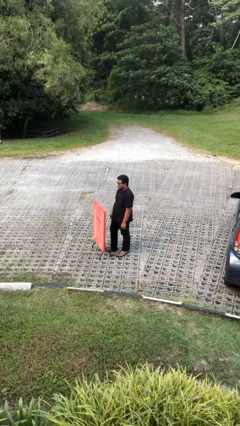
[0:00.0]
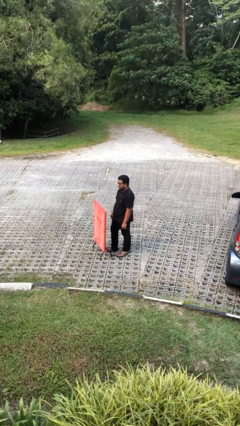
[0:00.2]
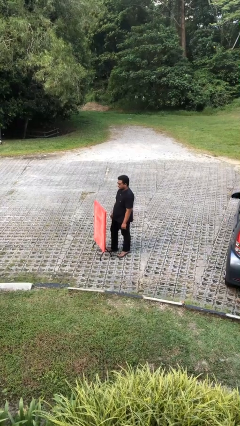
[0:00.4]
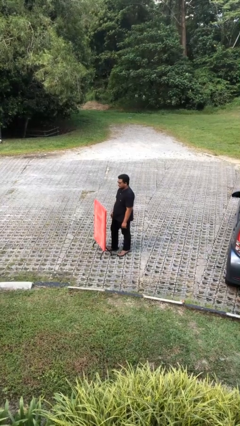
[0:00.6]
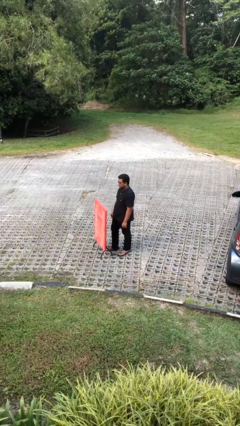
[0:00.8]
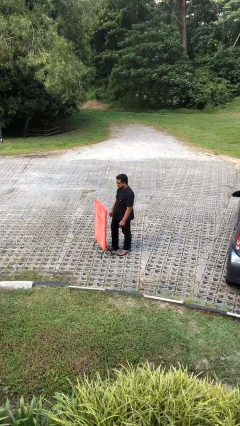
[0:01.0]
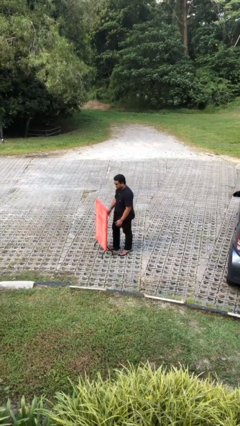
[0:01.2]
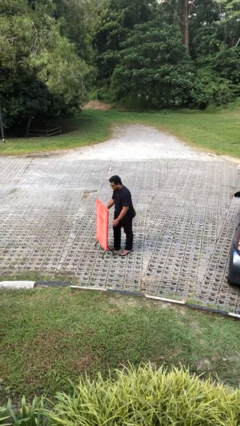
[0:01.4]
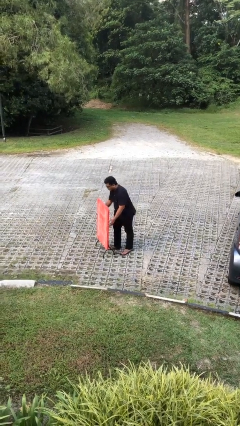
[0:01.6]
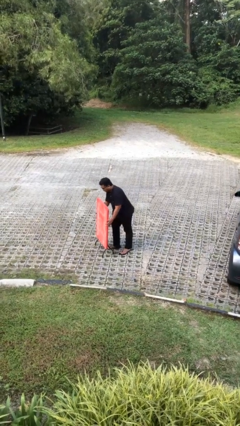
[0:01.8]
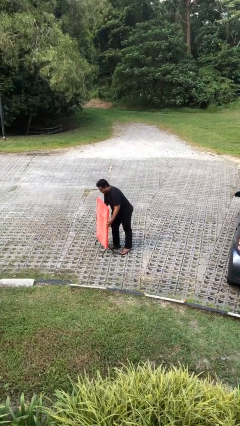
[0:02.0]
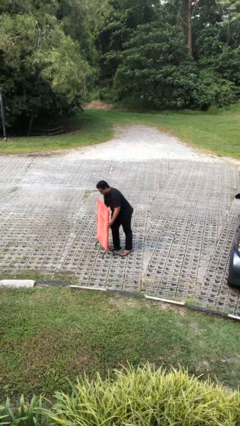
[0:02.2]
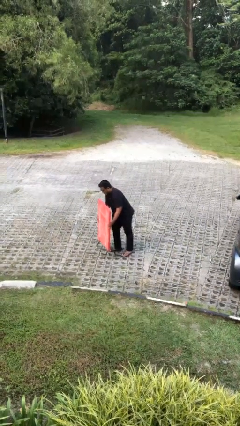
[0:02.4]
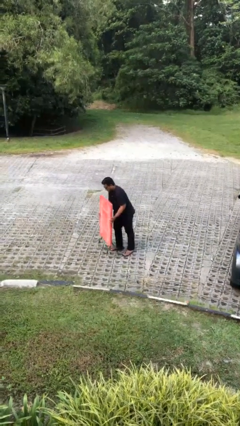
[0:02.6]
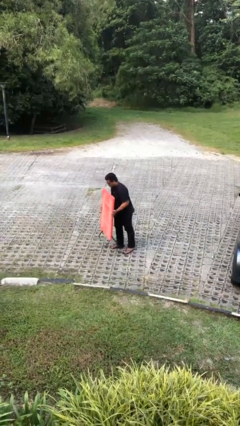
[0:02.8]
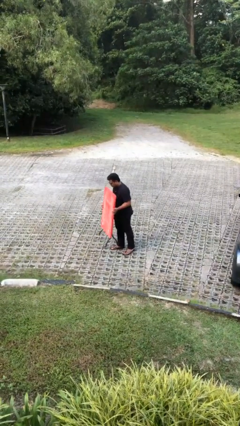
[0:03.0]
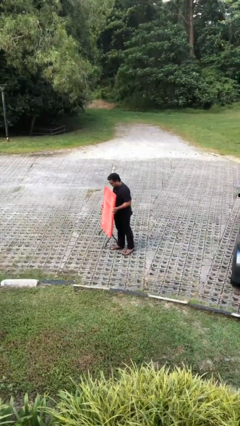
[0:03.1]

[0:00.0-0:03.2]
person picks up object from floor

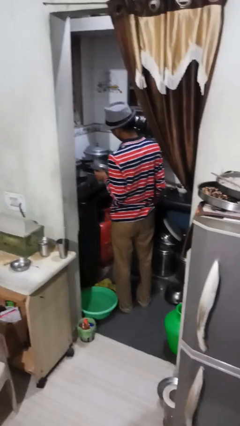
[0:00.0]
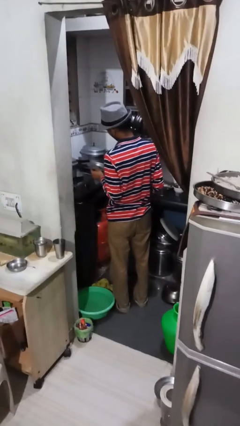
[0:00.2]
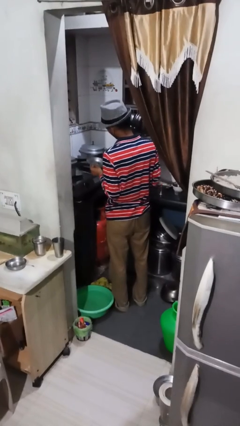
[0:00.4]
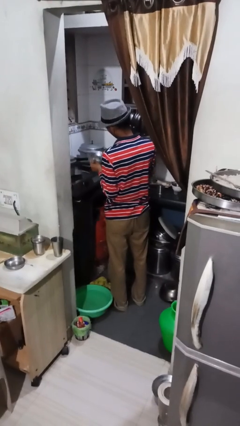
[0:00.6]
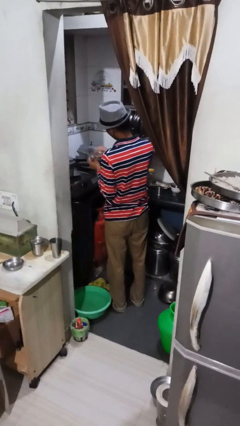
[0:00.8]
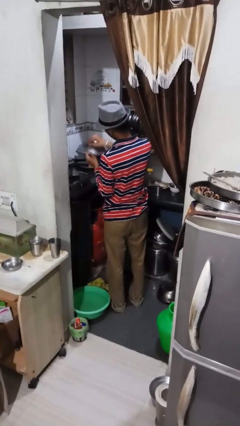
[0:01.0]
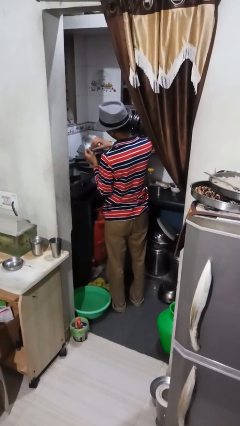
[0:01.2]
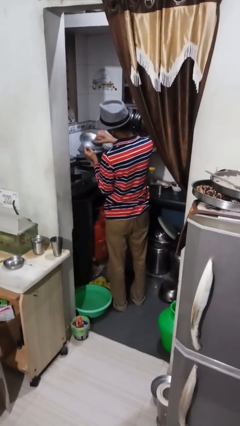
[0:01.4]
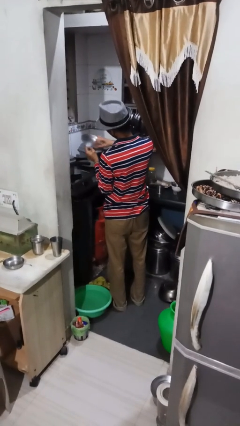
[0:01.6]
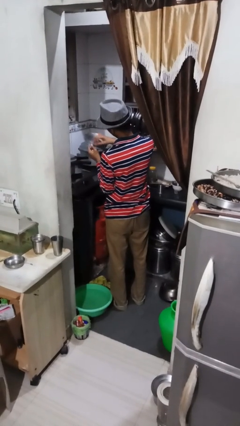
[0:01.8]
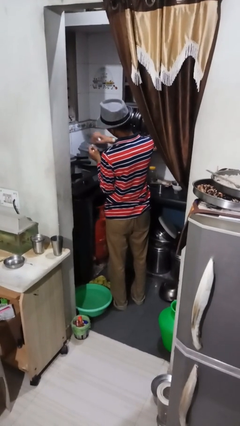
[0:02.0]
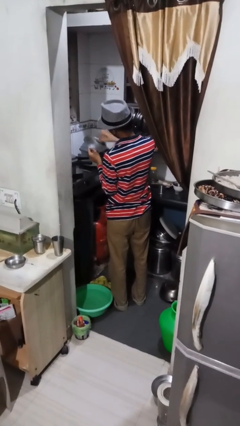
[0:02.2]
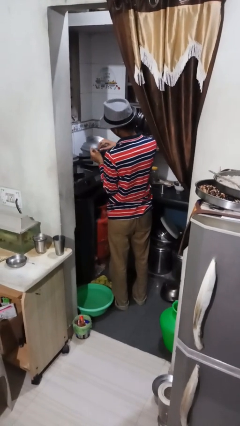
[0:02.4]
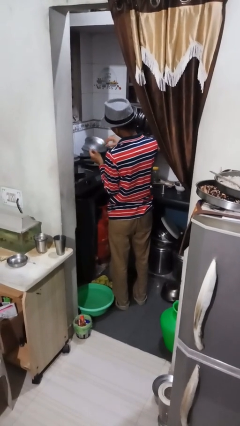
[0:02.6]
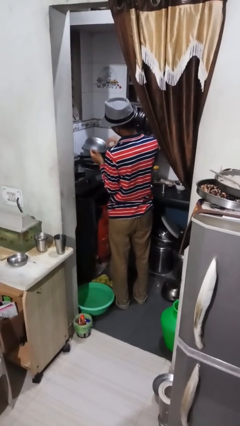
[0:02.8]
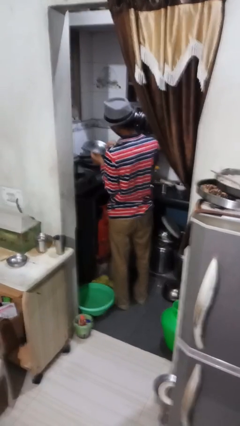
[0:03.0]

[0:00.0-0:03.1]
person washes dish

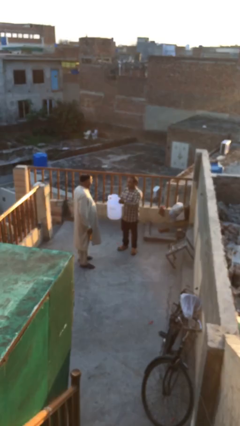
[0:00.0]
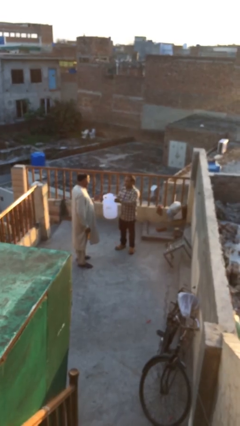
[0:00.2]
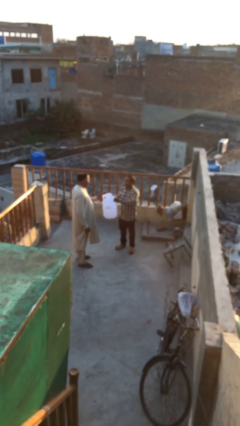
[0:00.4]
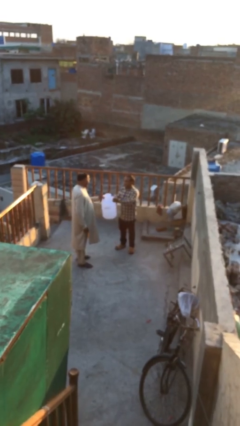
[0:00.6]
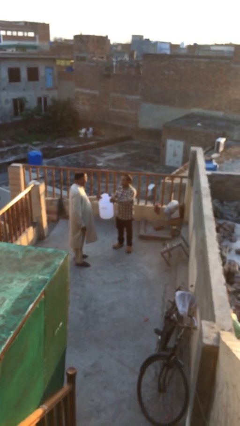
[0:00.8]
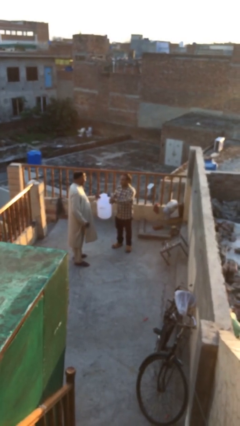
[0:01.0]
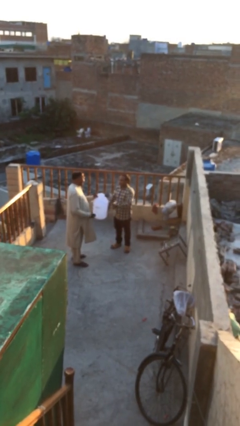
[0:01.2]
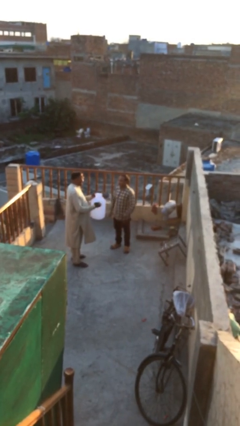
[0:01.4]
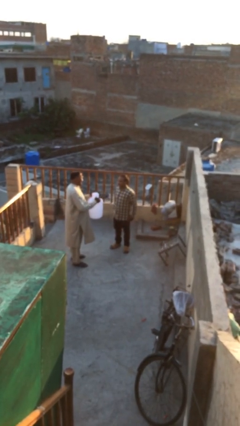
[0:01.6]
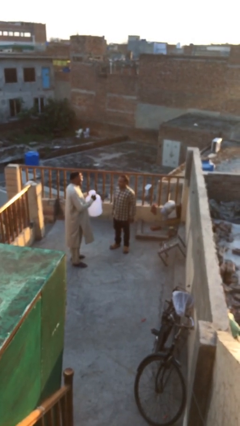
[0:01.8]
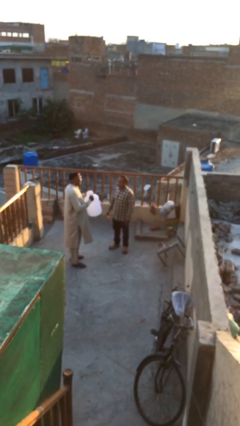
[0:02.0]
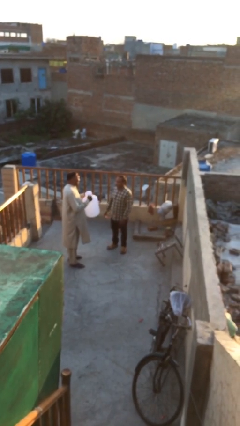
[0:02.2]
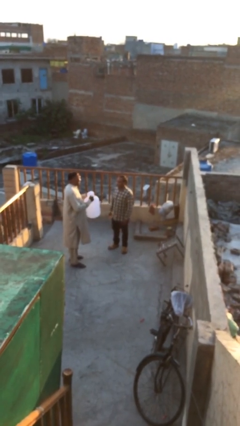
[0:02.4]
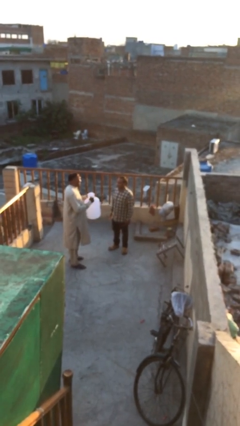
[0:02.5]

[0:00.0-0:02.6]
person transfers object to person

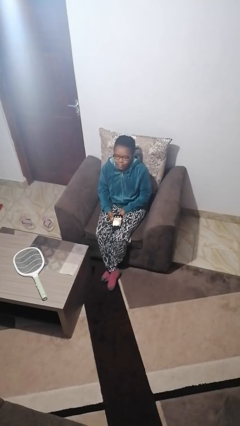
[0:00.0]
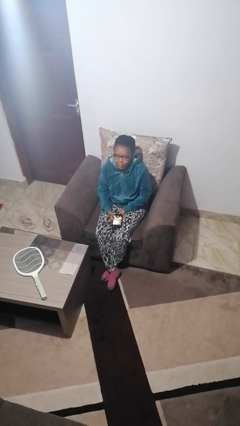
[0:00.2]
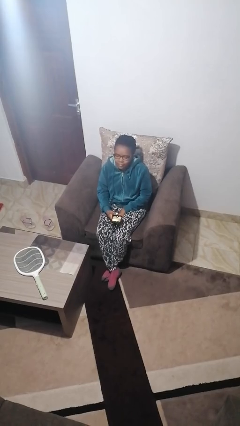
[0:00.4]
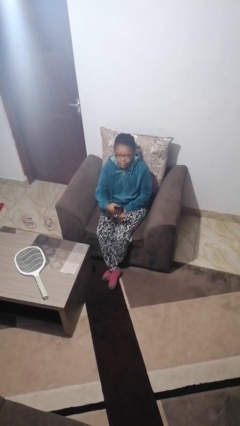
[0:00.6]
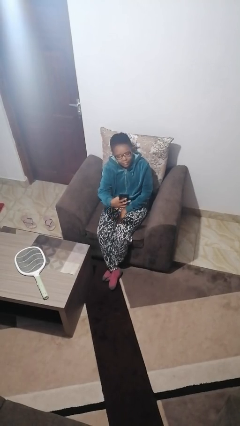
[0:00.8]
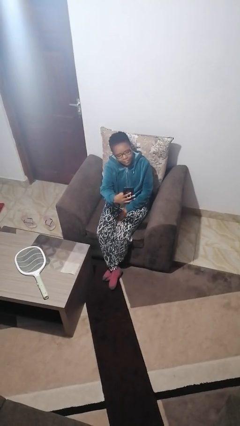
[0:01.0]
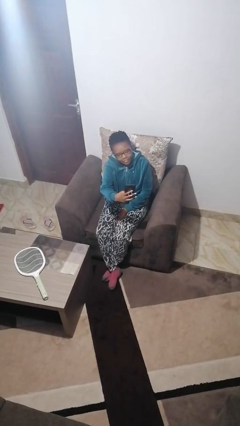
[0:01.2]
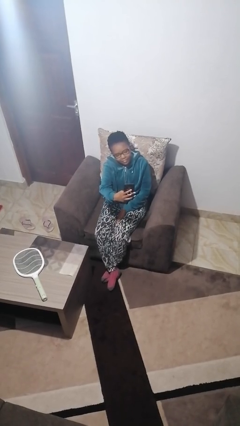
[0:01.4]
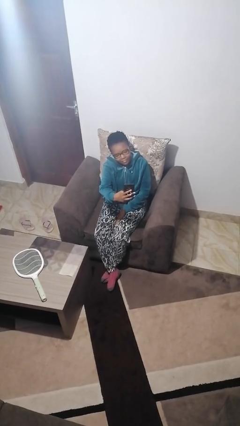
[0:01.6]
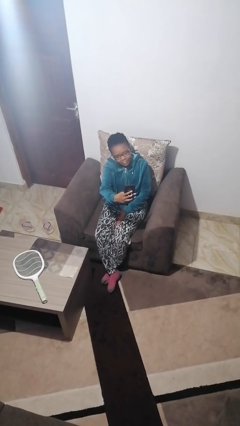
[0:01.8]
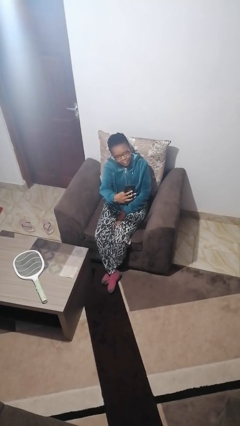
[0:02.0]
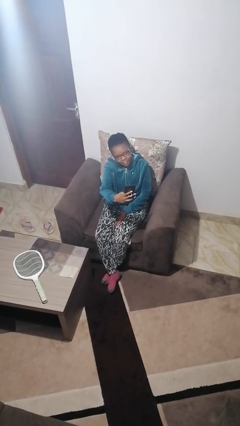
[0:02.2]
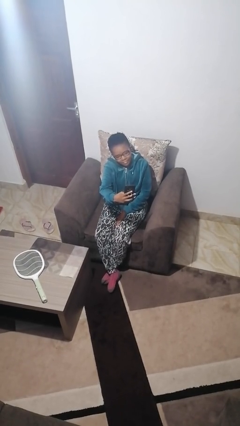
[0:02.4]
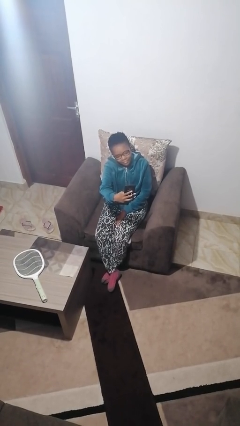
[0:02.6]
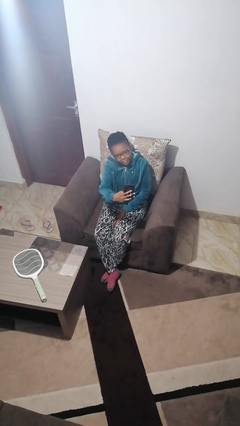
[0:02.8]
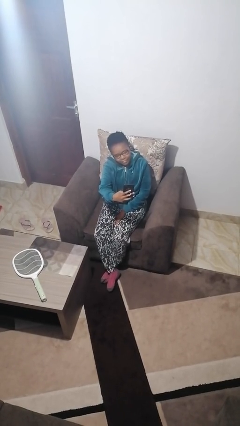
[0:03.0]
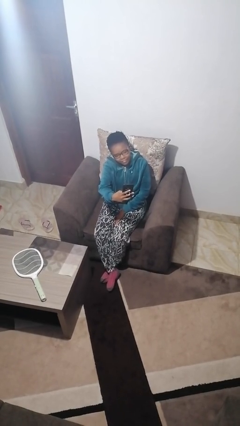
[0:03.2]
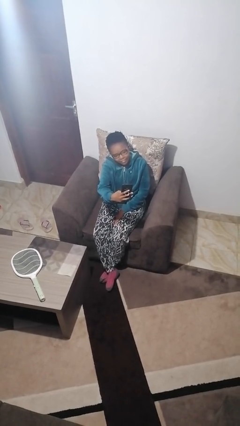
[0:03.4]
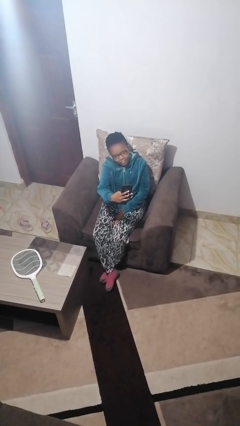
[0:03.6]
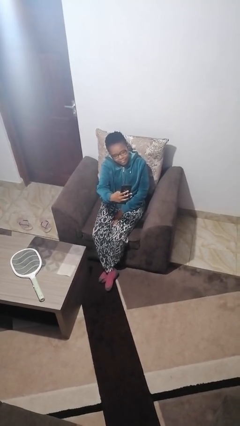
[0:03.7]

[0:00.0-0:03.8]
person takes selfie

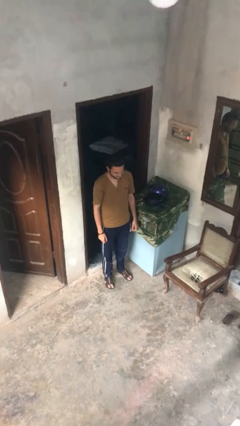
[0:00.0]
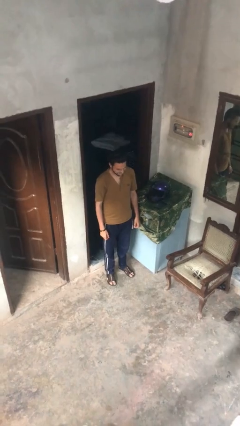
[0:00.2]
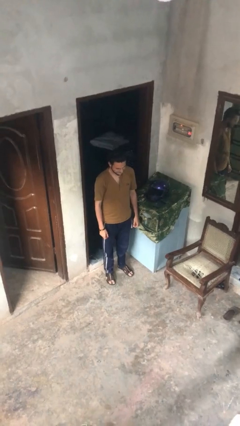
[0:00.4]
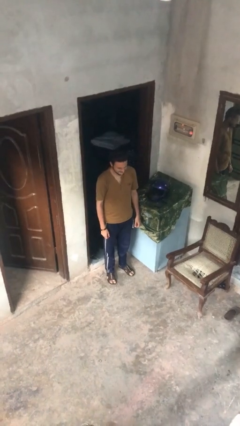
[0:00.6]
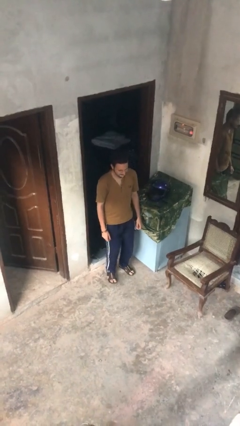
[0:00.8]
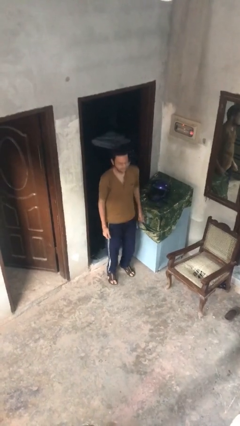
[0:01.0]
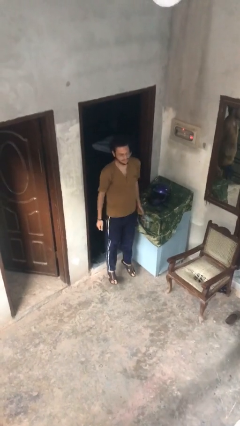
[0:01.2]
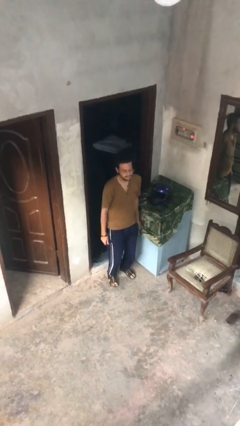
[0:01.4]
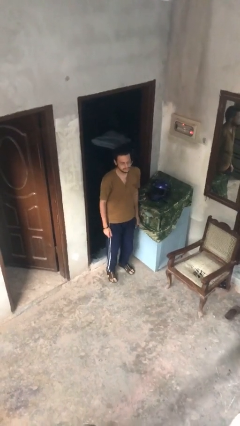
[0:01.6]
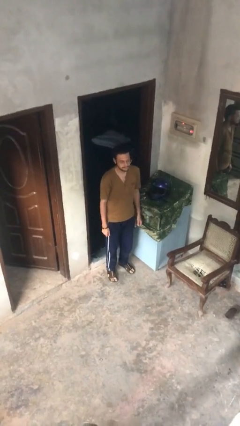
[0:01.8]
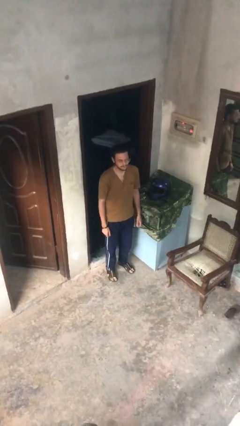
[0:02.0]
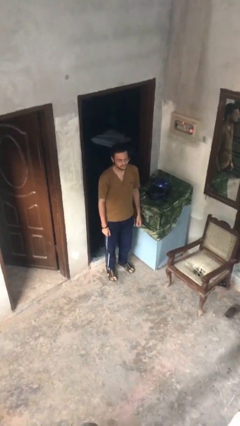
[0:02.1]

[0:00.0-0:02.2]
person jumps

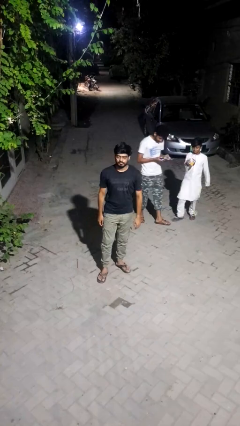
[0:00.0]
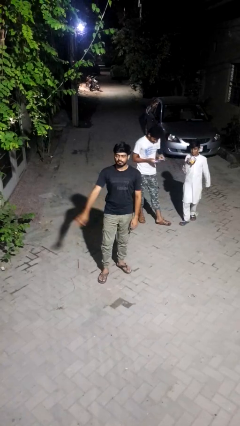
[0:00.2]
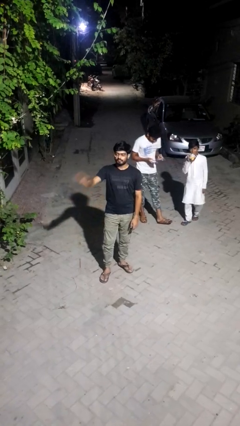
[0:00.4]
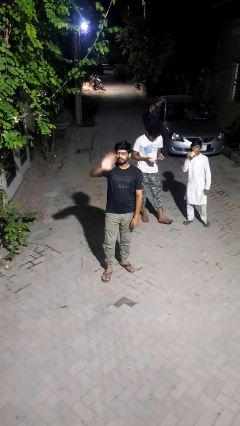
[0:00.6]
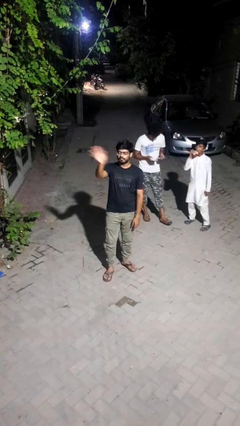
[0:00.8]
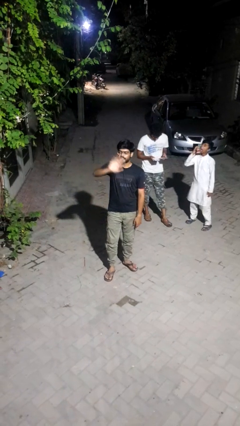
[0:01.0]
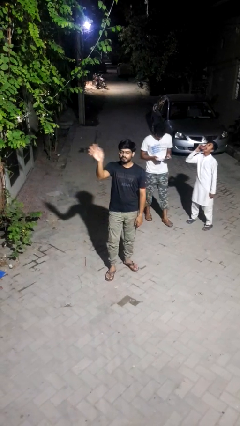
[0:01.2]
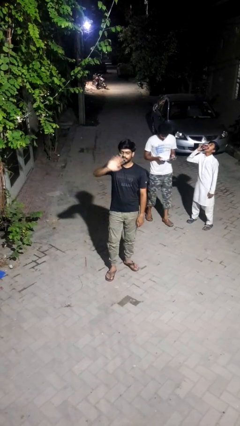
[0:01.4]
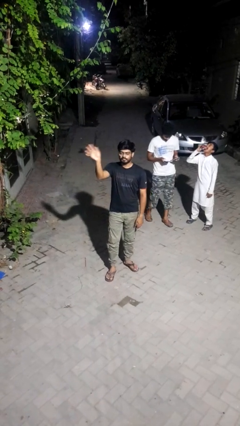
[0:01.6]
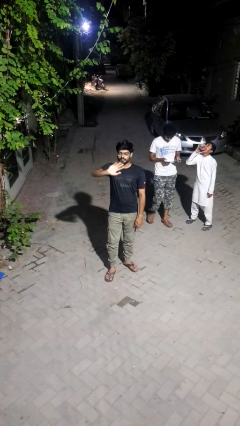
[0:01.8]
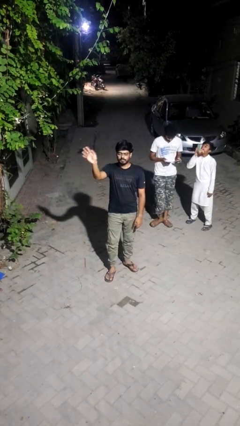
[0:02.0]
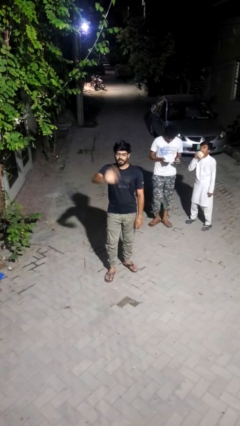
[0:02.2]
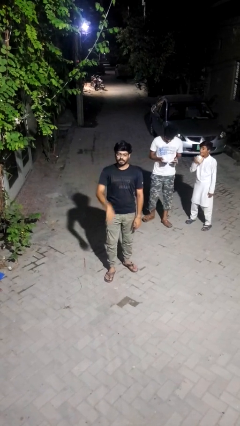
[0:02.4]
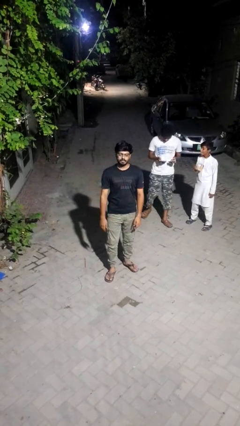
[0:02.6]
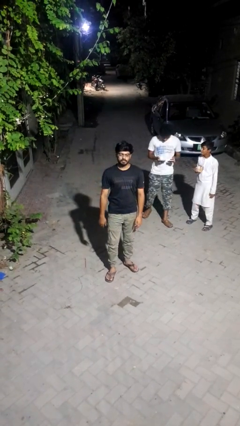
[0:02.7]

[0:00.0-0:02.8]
person waves at person

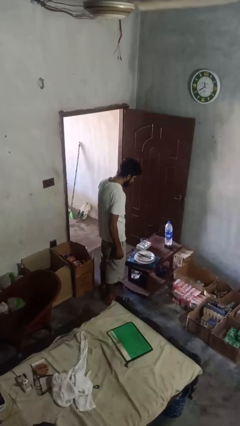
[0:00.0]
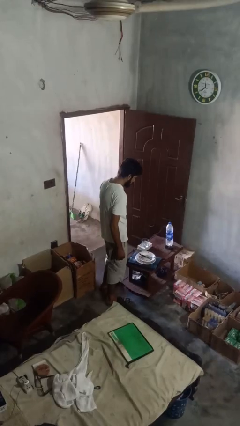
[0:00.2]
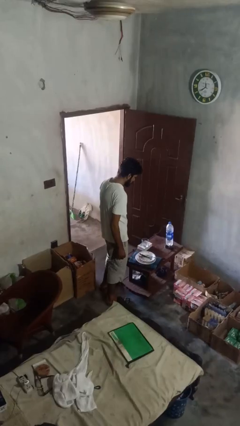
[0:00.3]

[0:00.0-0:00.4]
person picks up object from countertop
